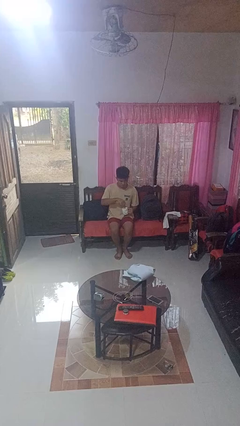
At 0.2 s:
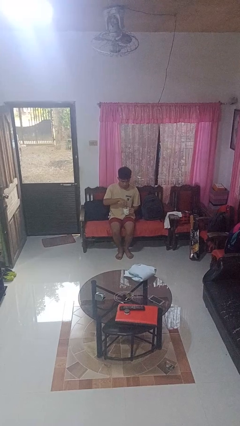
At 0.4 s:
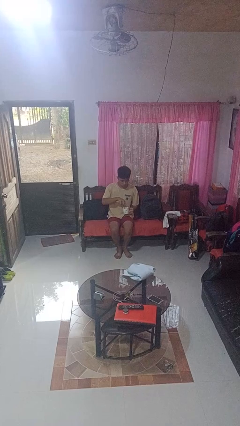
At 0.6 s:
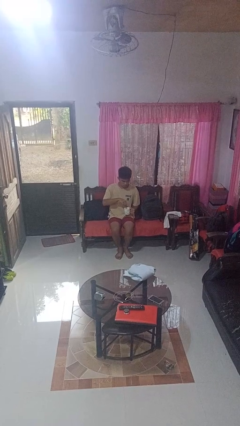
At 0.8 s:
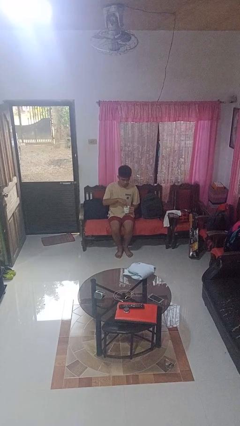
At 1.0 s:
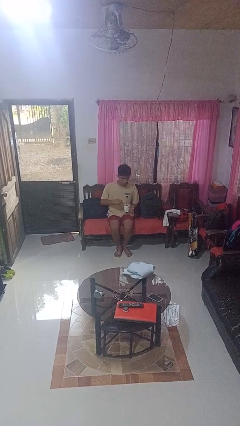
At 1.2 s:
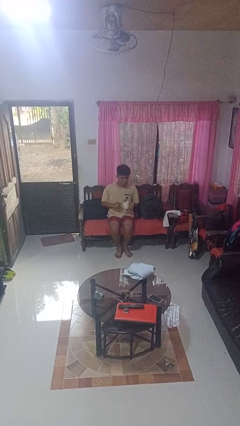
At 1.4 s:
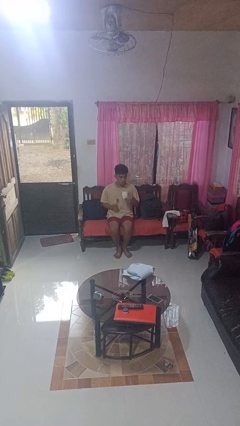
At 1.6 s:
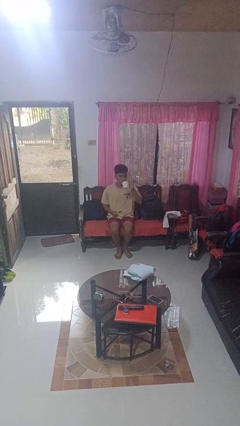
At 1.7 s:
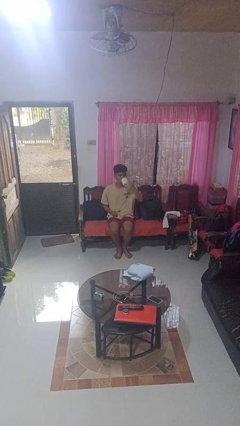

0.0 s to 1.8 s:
person stirs mug

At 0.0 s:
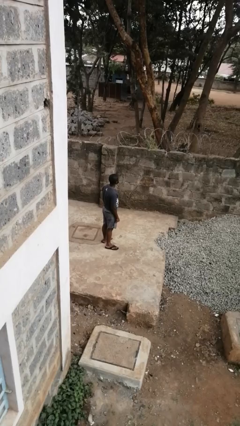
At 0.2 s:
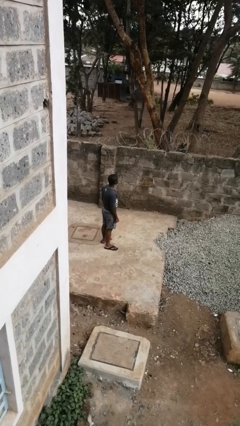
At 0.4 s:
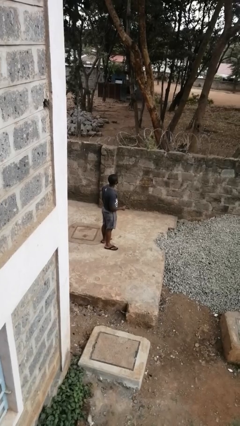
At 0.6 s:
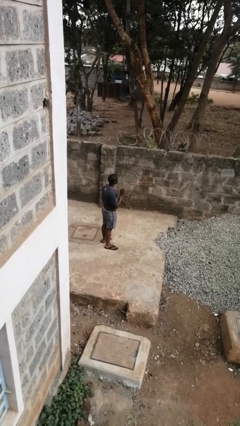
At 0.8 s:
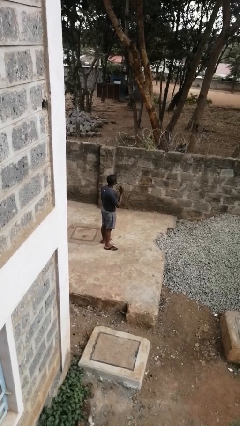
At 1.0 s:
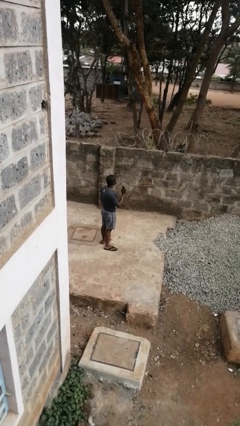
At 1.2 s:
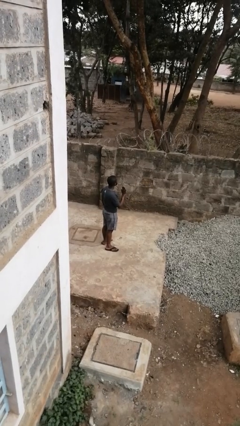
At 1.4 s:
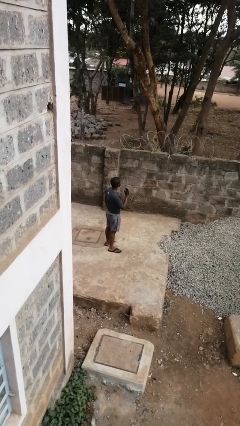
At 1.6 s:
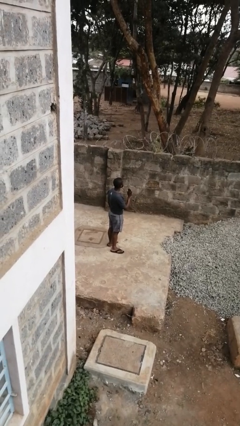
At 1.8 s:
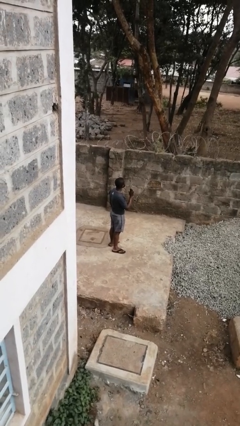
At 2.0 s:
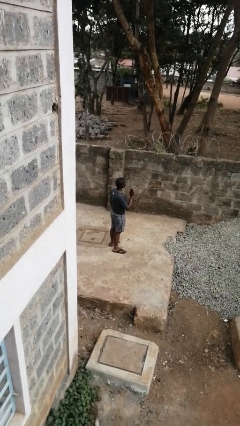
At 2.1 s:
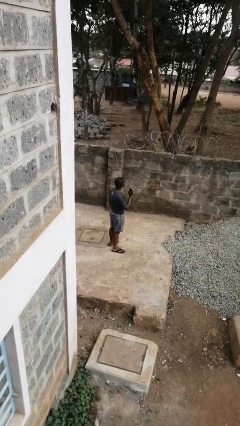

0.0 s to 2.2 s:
person gestures stop

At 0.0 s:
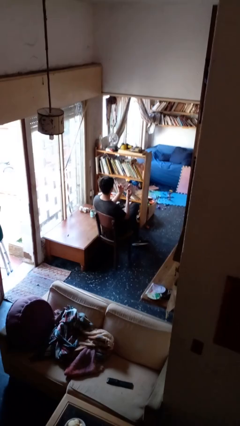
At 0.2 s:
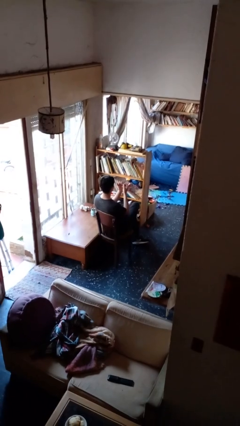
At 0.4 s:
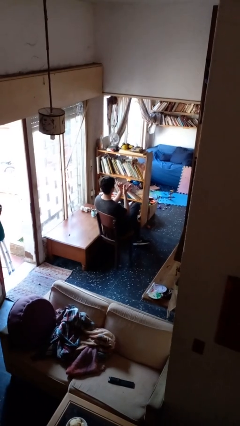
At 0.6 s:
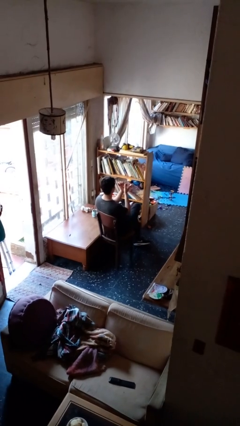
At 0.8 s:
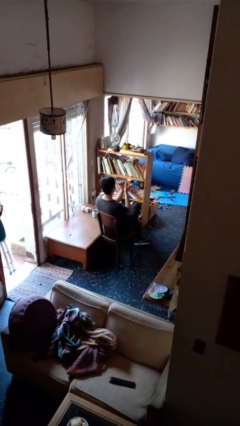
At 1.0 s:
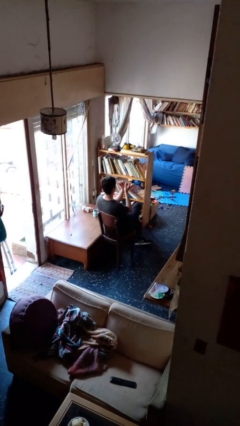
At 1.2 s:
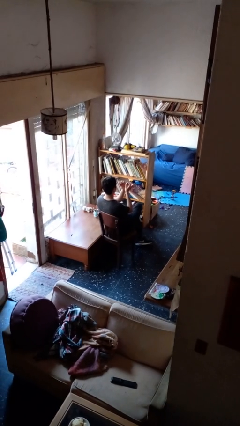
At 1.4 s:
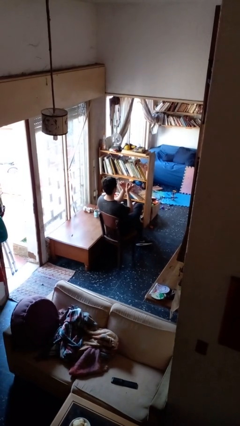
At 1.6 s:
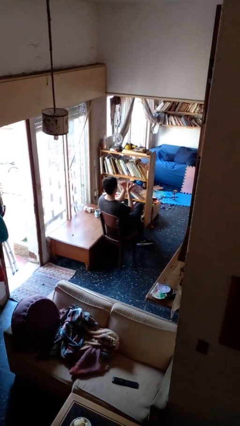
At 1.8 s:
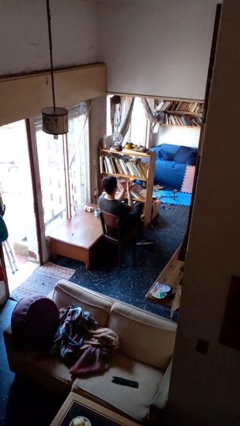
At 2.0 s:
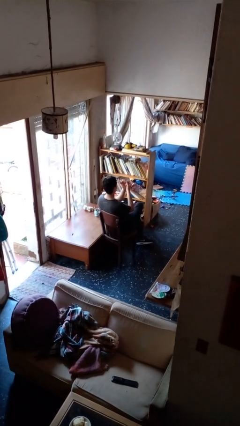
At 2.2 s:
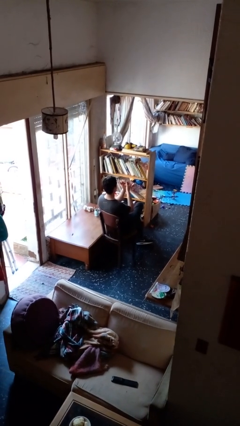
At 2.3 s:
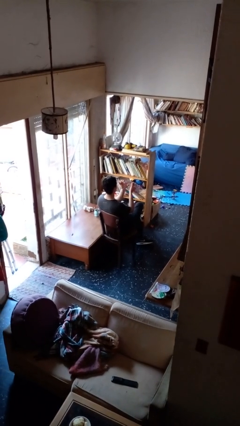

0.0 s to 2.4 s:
person files fingernails

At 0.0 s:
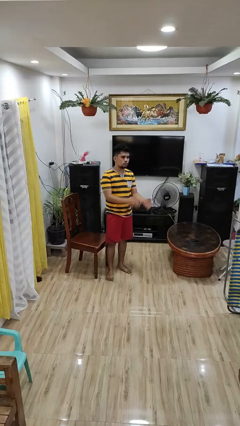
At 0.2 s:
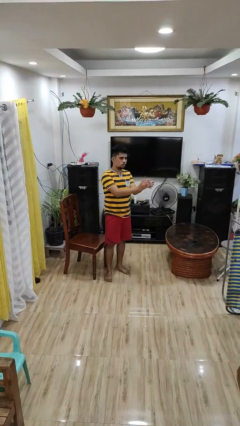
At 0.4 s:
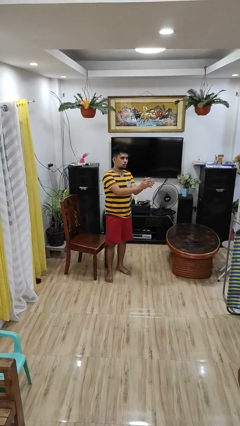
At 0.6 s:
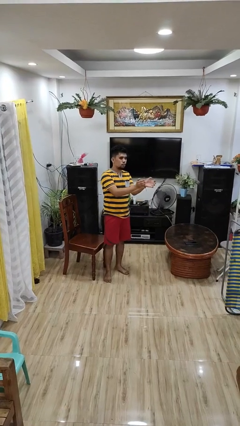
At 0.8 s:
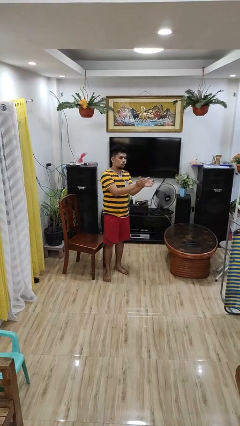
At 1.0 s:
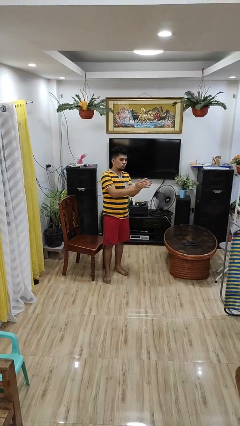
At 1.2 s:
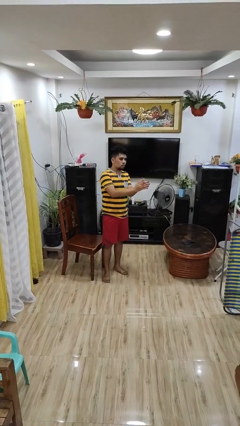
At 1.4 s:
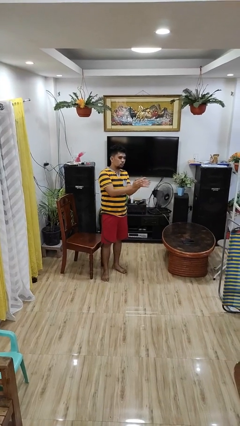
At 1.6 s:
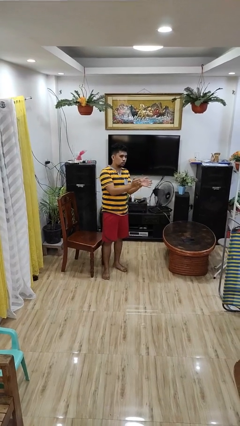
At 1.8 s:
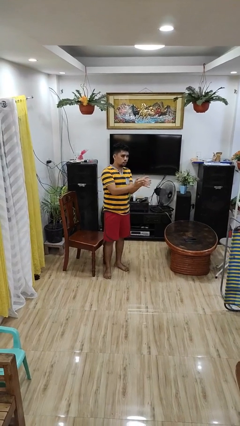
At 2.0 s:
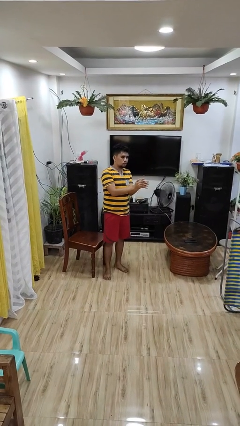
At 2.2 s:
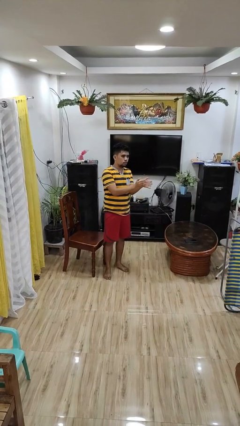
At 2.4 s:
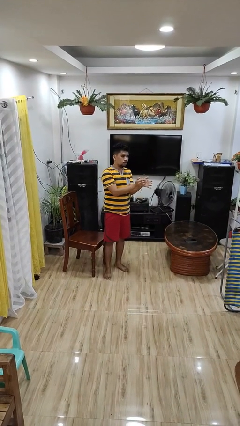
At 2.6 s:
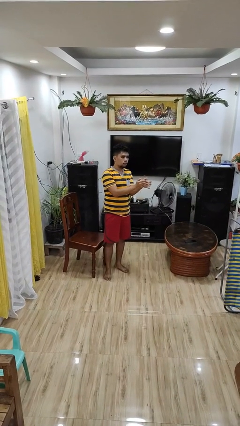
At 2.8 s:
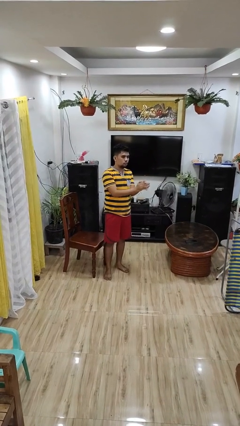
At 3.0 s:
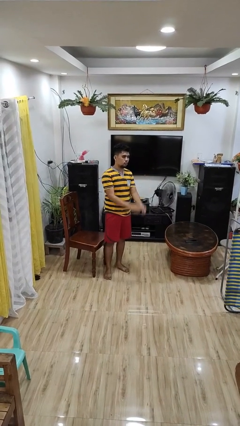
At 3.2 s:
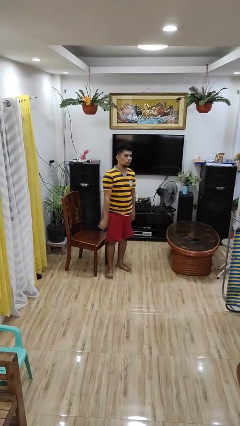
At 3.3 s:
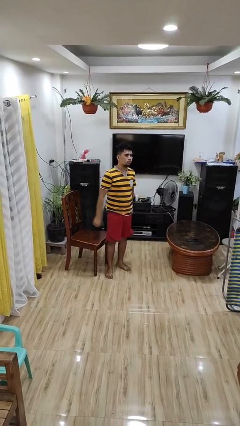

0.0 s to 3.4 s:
person claps hands

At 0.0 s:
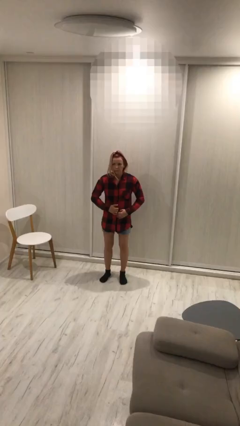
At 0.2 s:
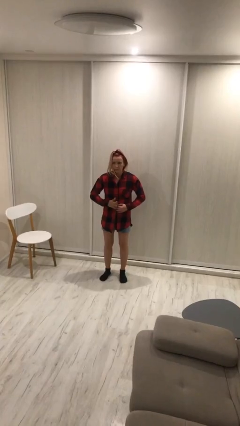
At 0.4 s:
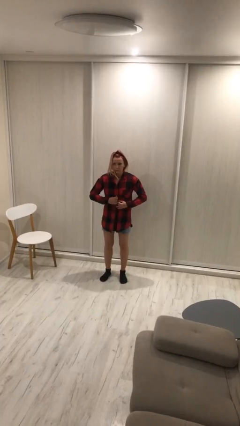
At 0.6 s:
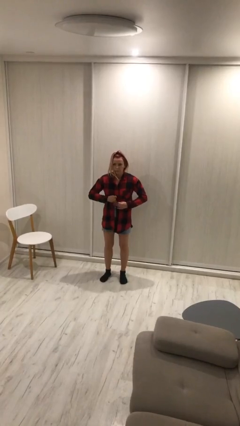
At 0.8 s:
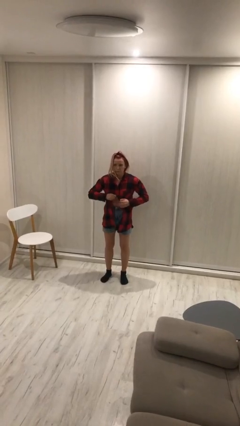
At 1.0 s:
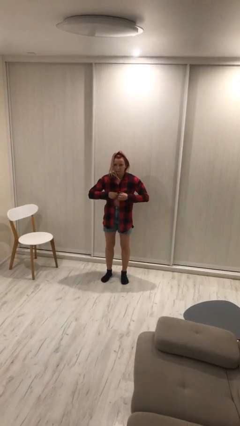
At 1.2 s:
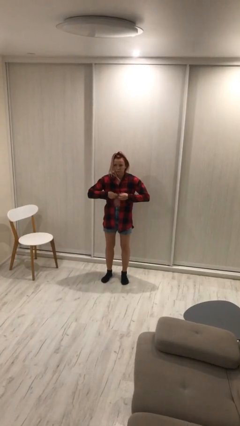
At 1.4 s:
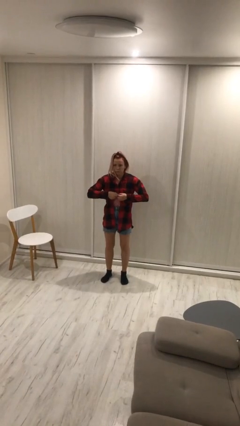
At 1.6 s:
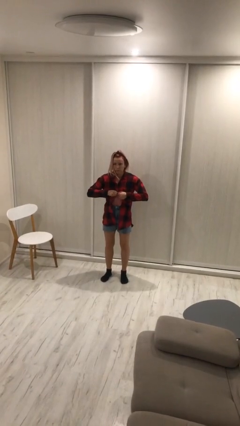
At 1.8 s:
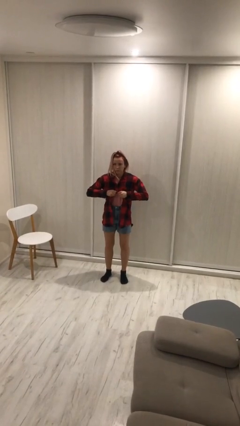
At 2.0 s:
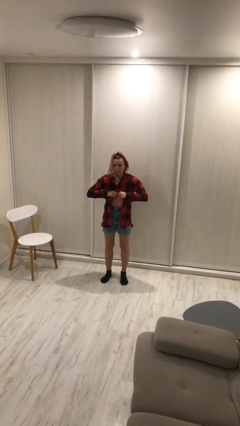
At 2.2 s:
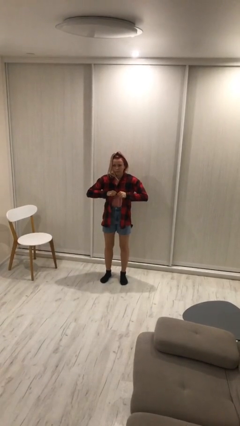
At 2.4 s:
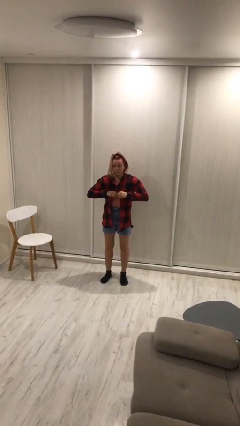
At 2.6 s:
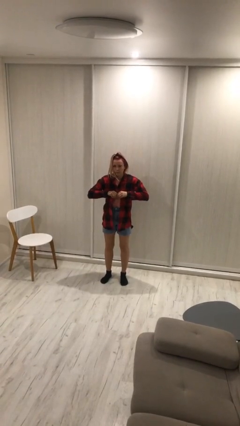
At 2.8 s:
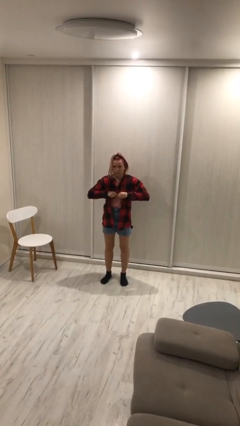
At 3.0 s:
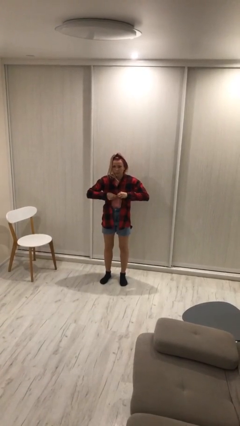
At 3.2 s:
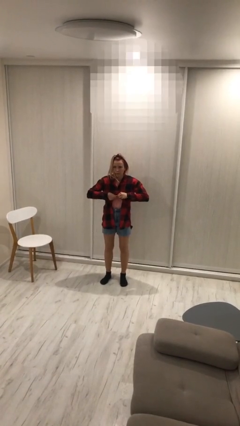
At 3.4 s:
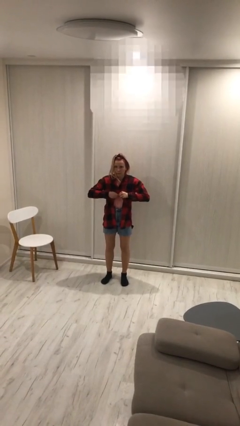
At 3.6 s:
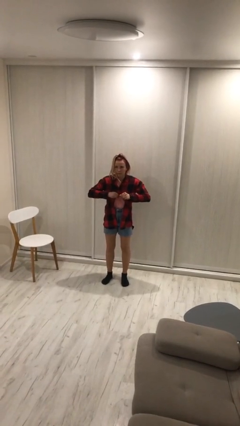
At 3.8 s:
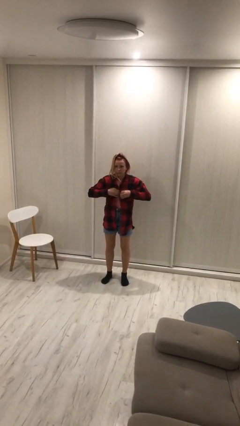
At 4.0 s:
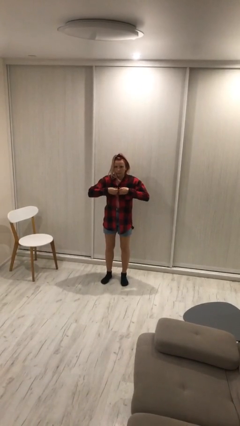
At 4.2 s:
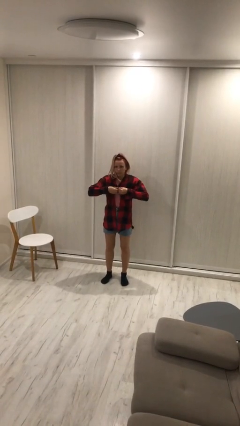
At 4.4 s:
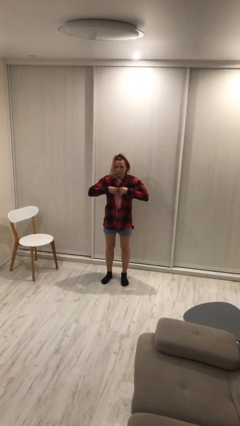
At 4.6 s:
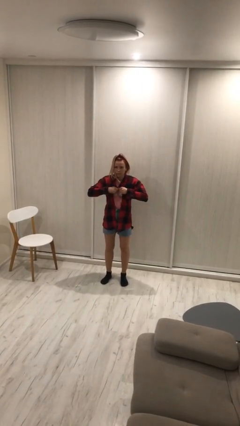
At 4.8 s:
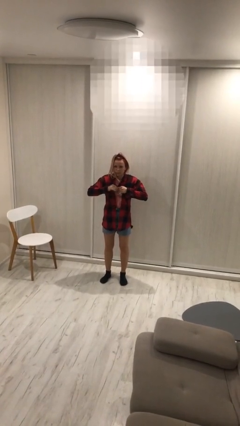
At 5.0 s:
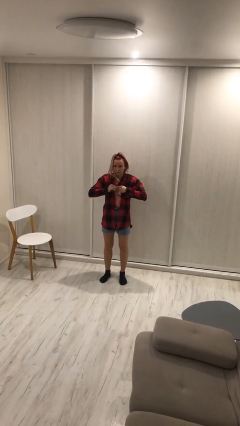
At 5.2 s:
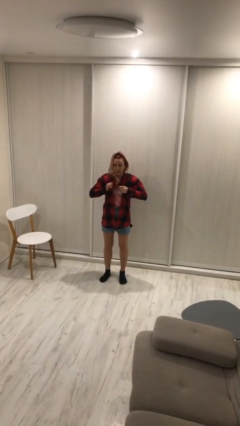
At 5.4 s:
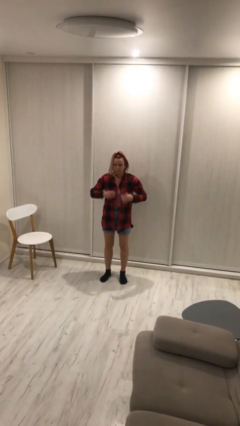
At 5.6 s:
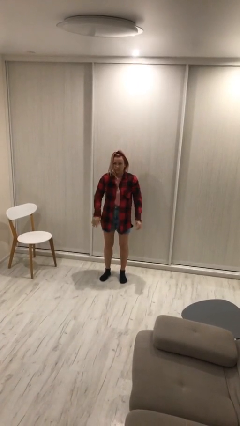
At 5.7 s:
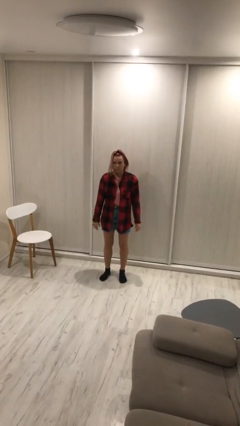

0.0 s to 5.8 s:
person unbuttons shirt

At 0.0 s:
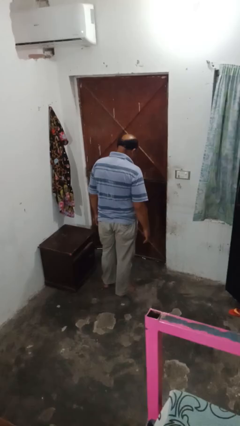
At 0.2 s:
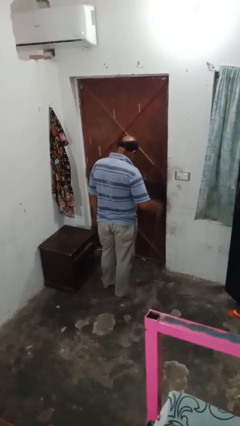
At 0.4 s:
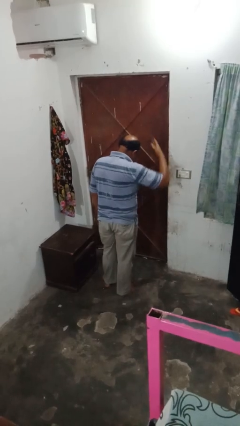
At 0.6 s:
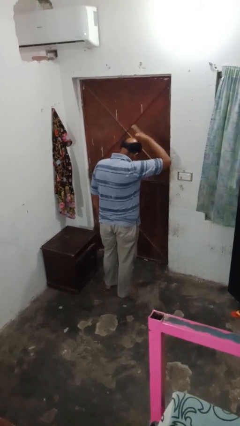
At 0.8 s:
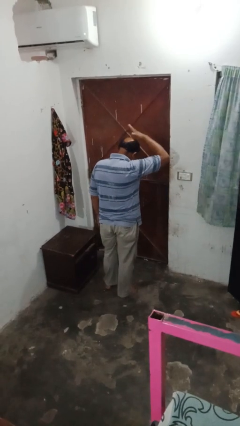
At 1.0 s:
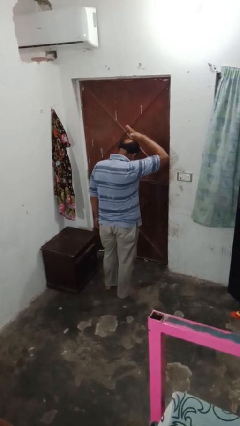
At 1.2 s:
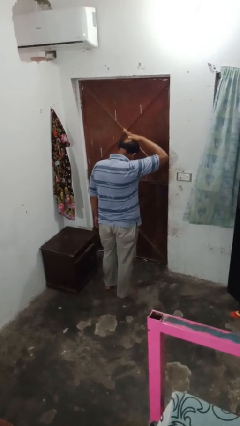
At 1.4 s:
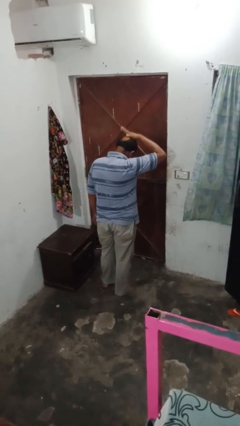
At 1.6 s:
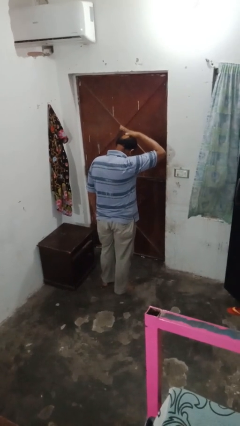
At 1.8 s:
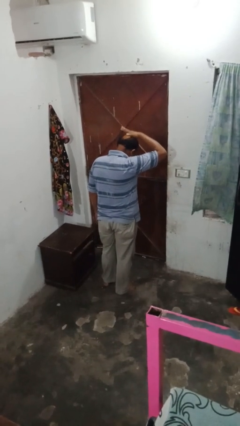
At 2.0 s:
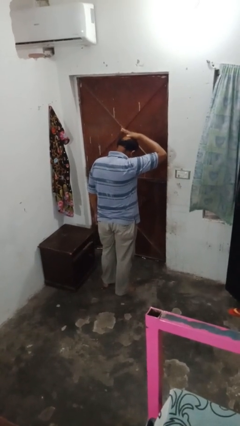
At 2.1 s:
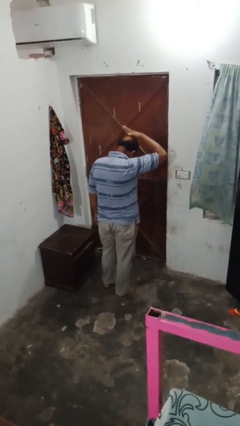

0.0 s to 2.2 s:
person pats head
